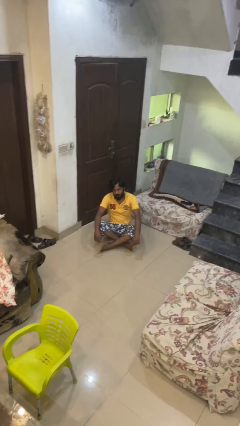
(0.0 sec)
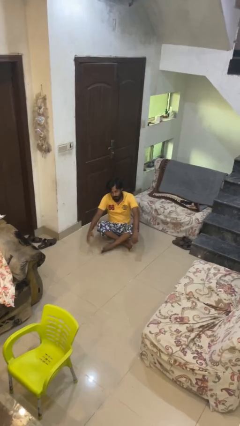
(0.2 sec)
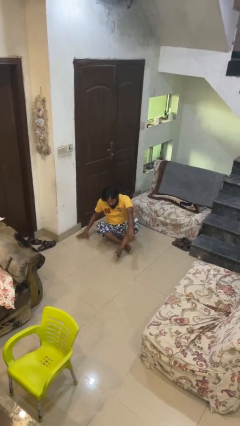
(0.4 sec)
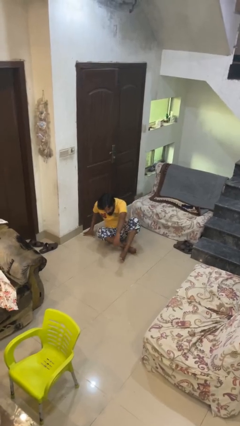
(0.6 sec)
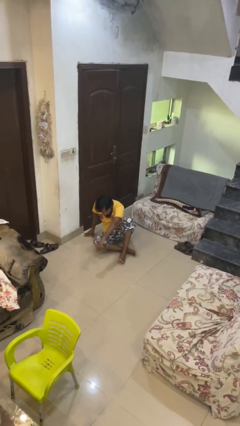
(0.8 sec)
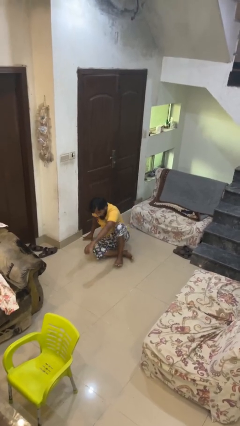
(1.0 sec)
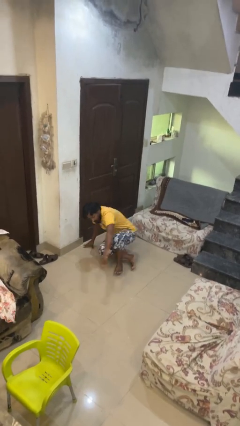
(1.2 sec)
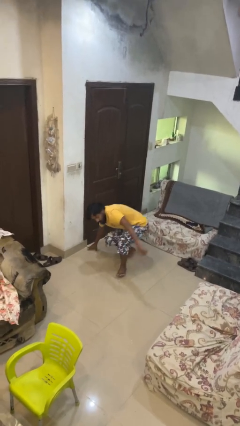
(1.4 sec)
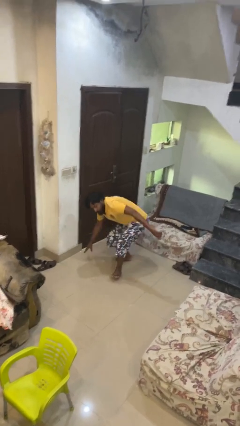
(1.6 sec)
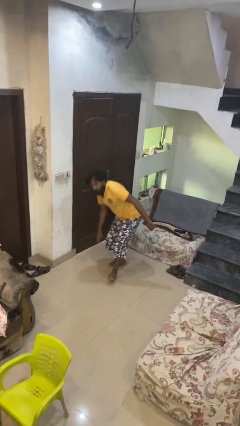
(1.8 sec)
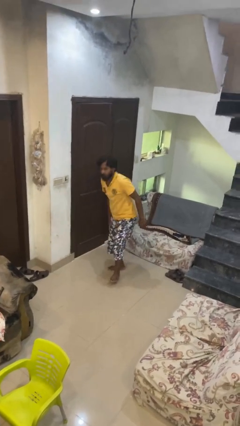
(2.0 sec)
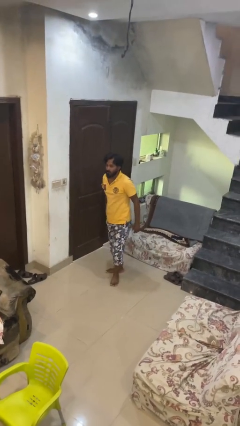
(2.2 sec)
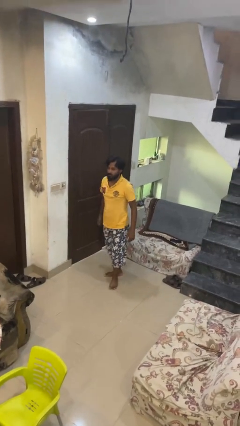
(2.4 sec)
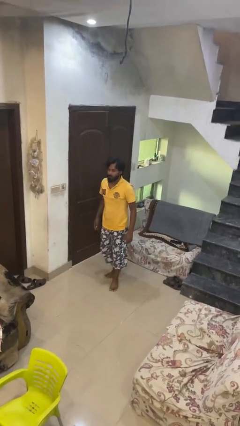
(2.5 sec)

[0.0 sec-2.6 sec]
person stands up from floor

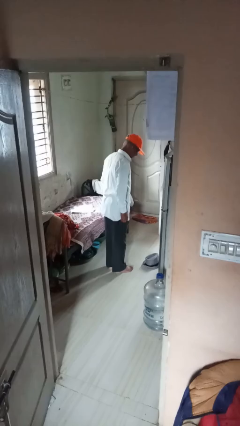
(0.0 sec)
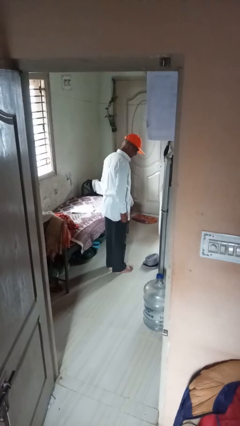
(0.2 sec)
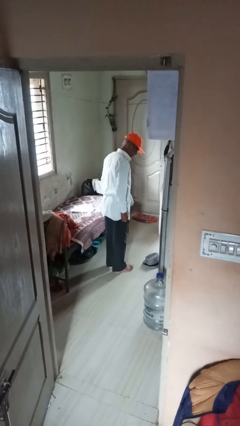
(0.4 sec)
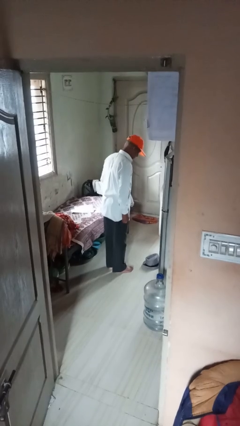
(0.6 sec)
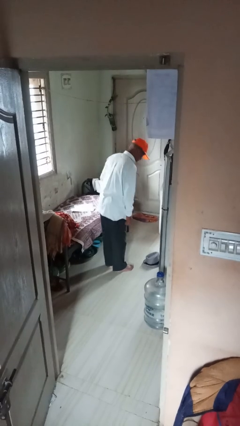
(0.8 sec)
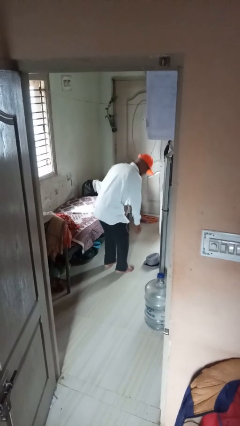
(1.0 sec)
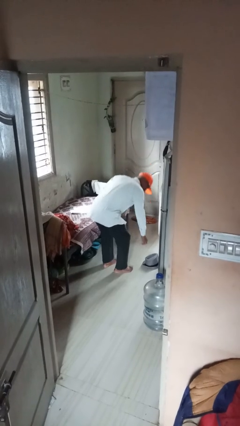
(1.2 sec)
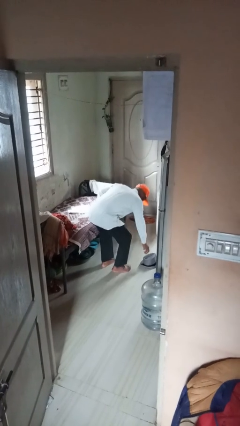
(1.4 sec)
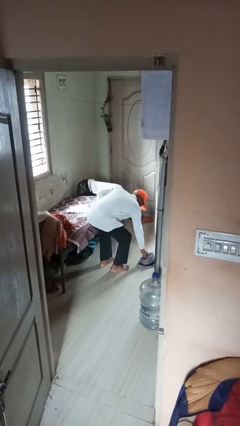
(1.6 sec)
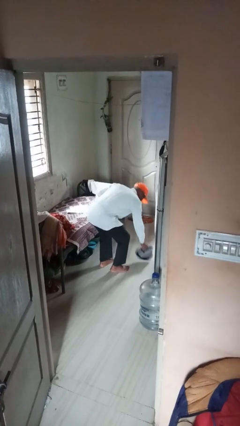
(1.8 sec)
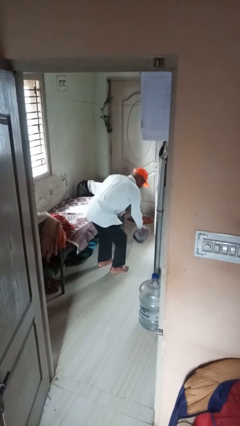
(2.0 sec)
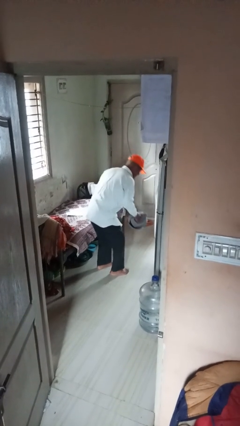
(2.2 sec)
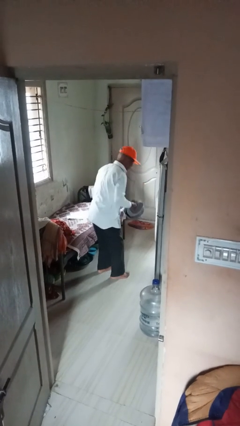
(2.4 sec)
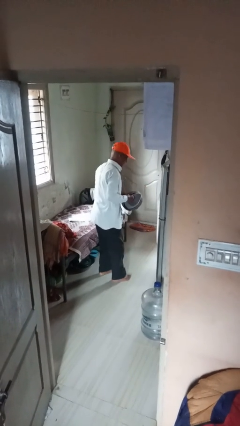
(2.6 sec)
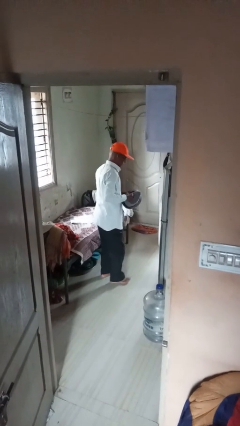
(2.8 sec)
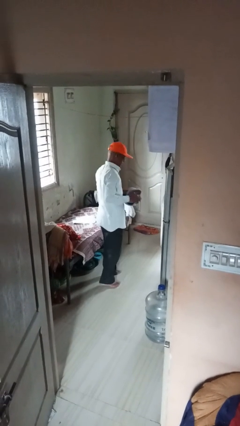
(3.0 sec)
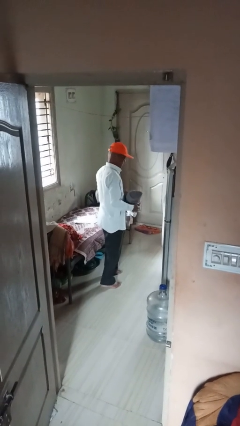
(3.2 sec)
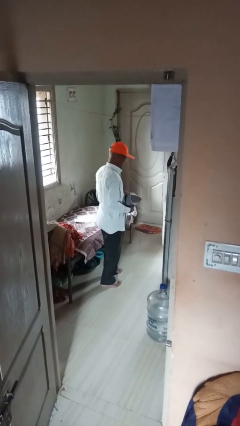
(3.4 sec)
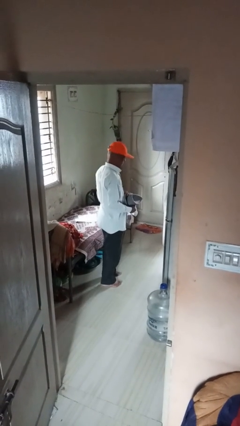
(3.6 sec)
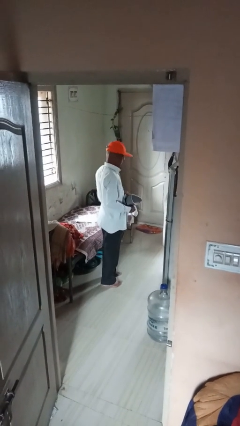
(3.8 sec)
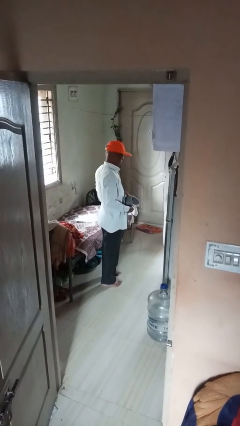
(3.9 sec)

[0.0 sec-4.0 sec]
person picks up object from floor

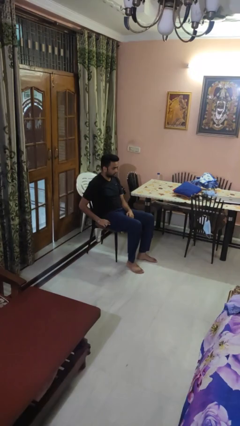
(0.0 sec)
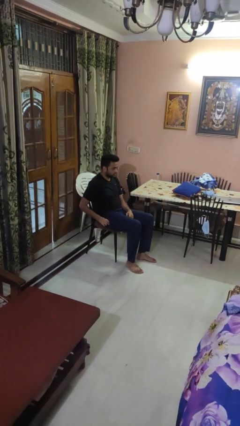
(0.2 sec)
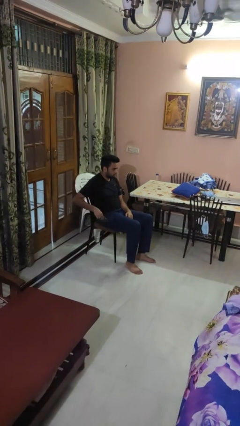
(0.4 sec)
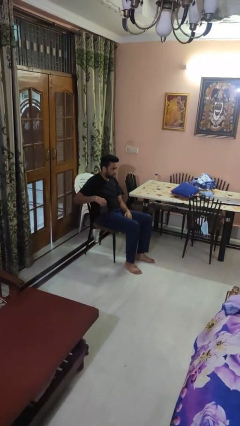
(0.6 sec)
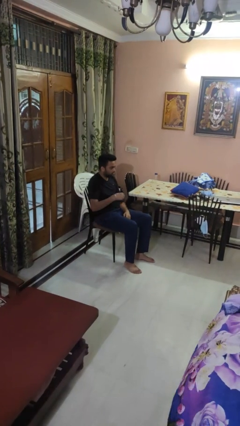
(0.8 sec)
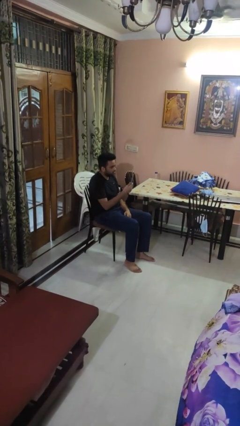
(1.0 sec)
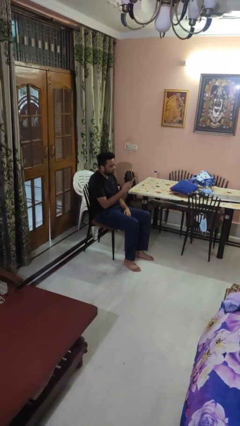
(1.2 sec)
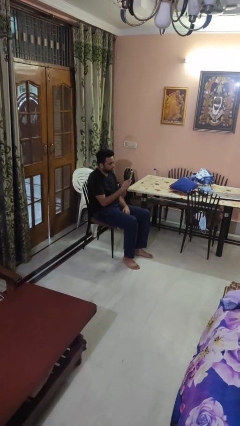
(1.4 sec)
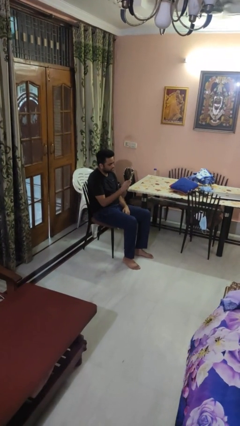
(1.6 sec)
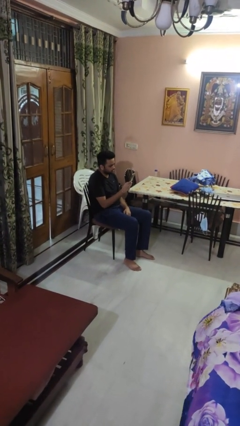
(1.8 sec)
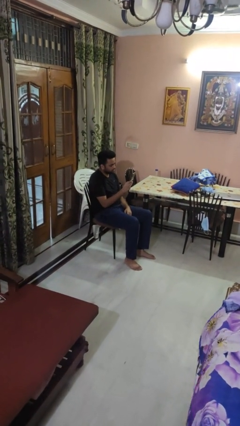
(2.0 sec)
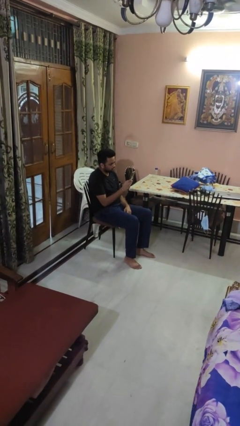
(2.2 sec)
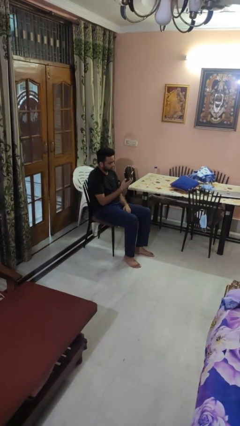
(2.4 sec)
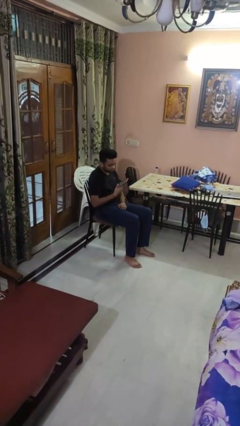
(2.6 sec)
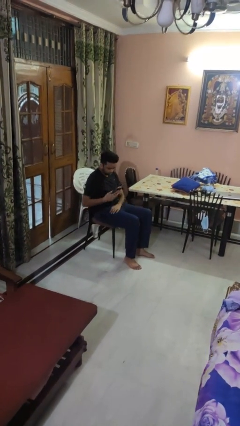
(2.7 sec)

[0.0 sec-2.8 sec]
person takes phone from pocket

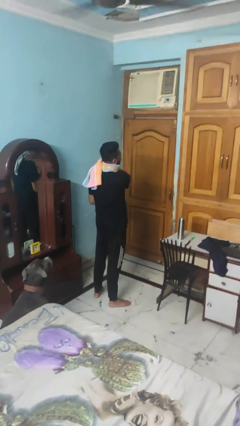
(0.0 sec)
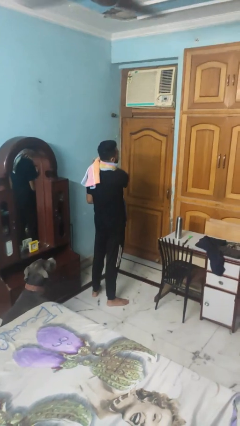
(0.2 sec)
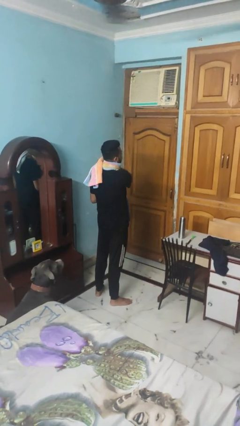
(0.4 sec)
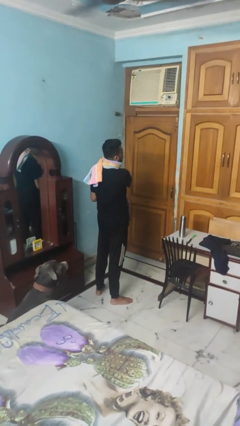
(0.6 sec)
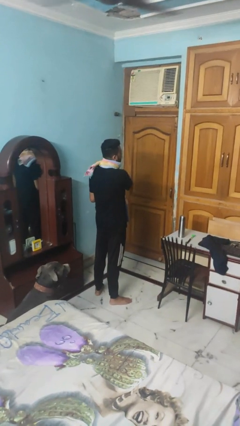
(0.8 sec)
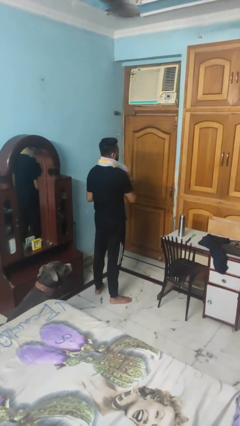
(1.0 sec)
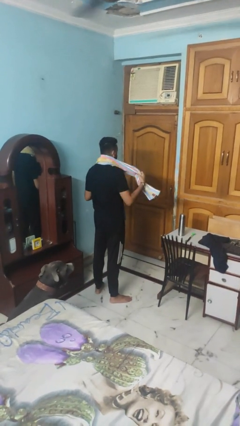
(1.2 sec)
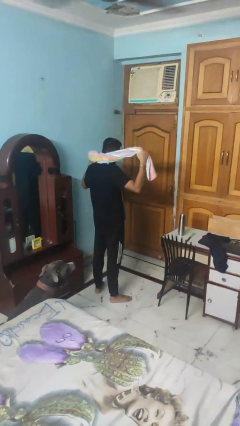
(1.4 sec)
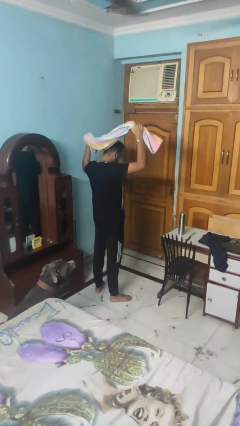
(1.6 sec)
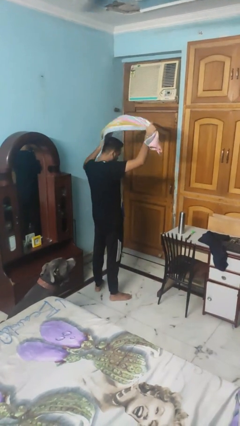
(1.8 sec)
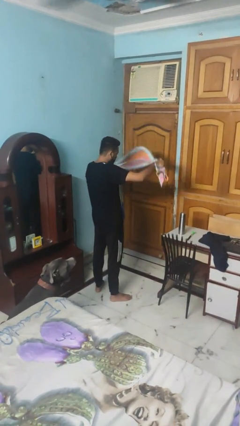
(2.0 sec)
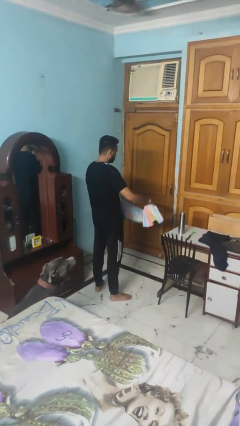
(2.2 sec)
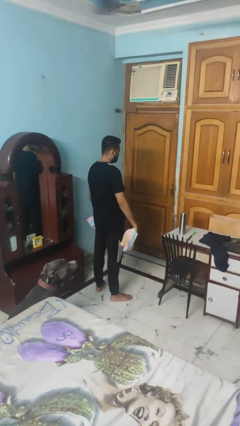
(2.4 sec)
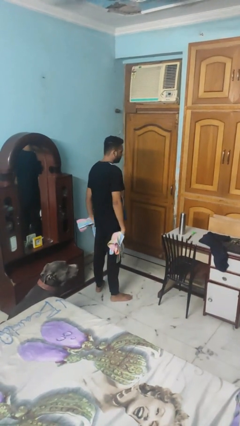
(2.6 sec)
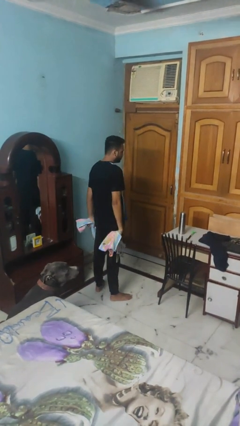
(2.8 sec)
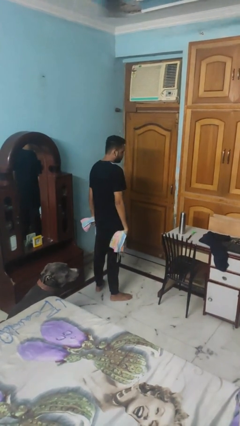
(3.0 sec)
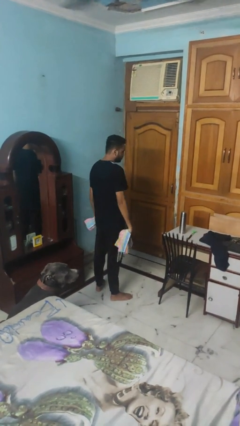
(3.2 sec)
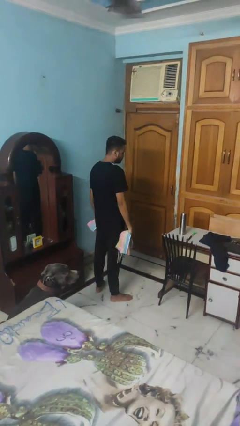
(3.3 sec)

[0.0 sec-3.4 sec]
person takes off scarf

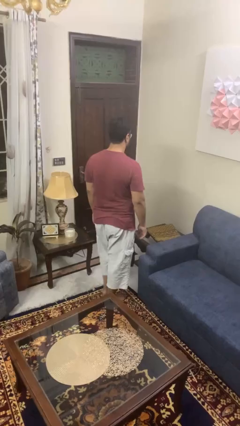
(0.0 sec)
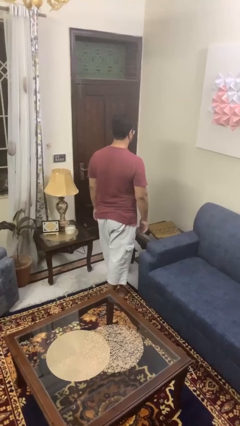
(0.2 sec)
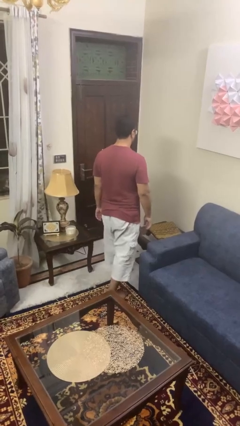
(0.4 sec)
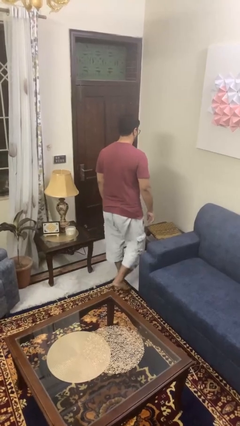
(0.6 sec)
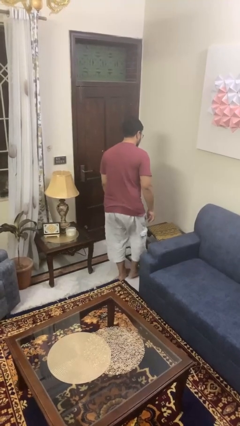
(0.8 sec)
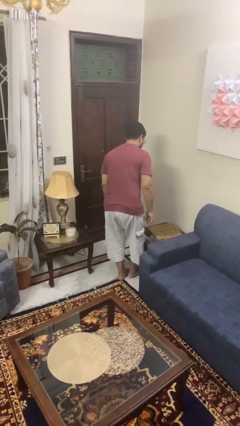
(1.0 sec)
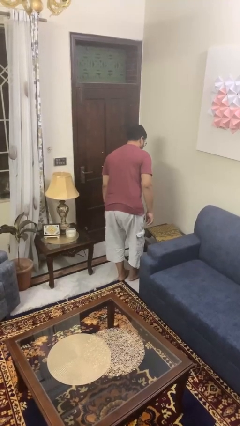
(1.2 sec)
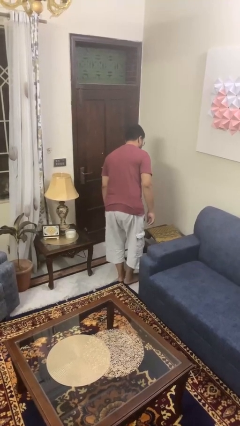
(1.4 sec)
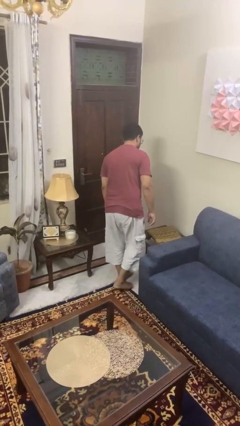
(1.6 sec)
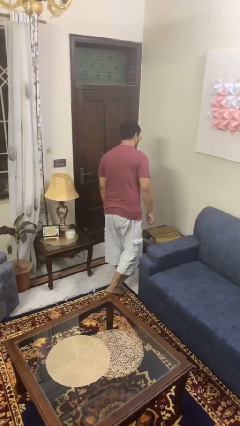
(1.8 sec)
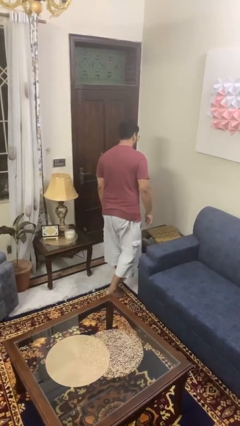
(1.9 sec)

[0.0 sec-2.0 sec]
person bumps into table

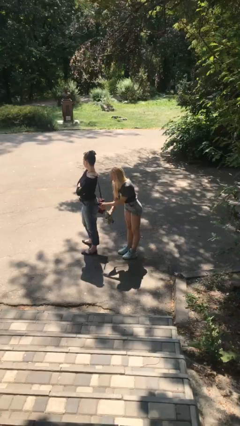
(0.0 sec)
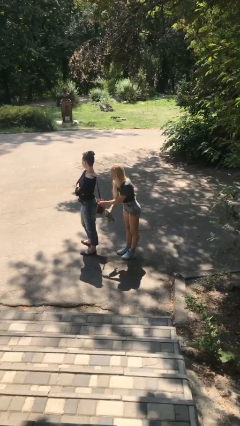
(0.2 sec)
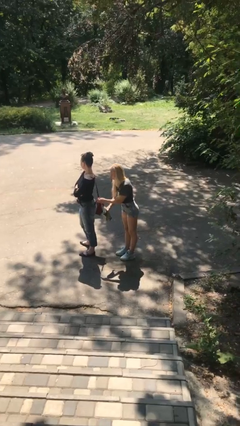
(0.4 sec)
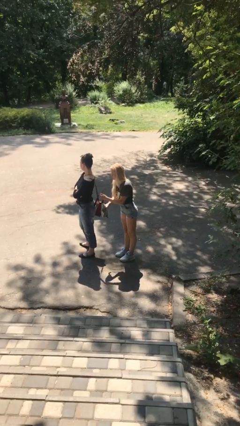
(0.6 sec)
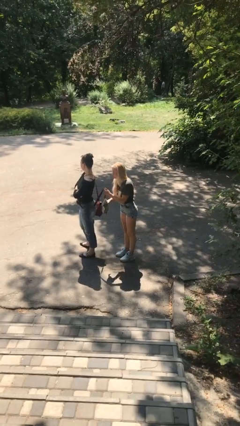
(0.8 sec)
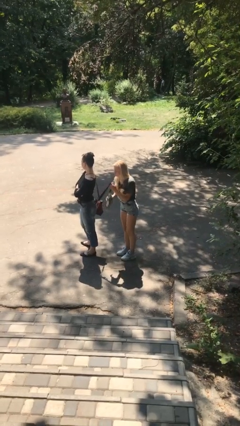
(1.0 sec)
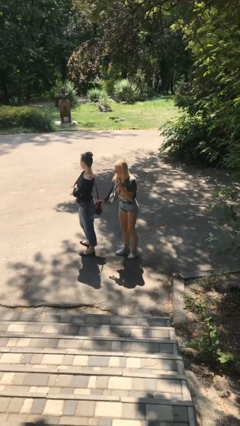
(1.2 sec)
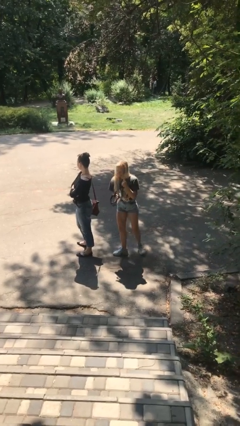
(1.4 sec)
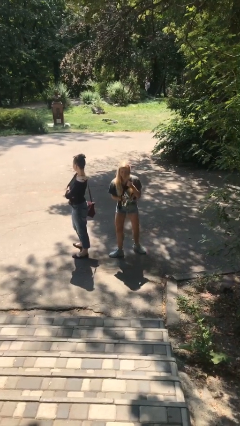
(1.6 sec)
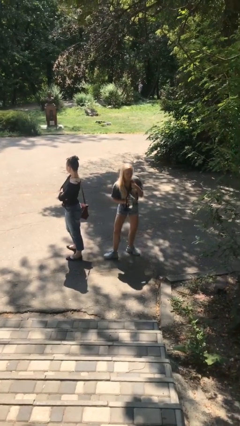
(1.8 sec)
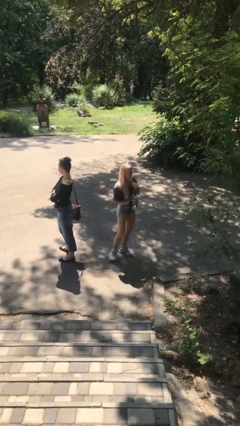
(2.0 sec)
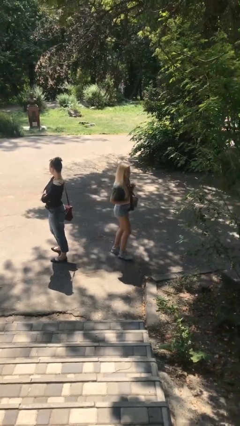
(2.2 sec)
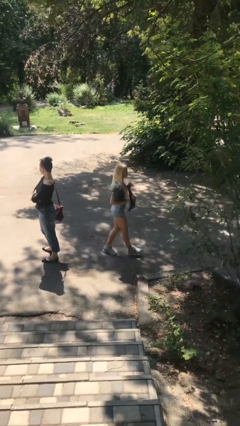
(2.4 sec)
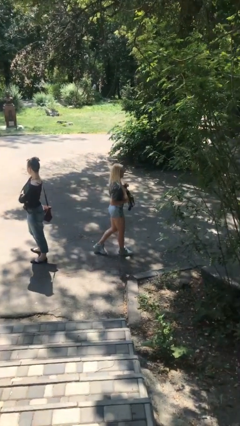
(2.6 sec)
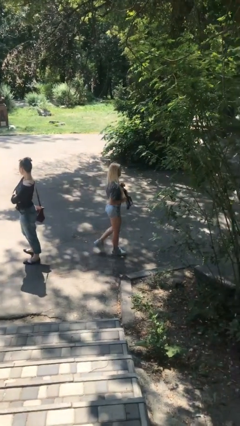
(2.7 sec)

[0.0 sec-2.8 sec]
person steals object from person
